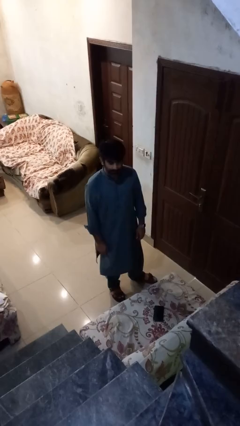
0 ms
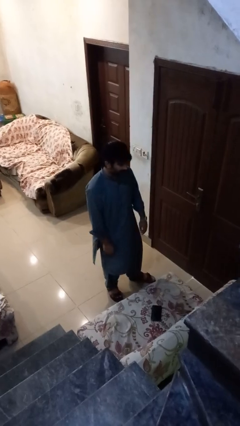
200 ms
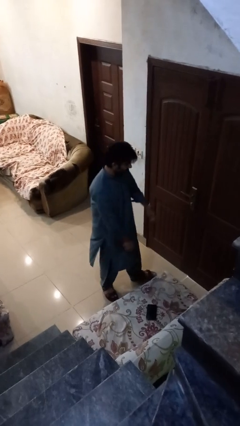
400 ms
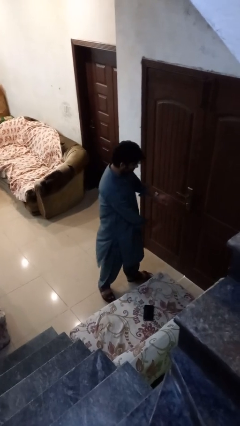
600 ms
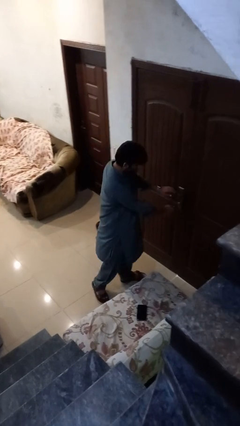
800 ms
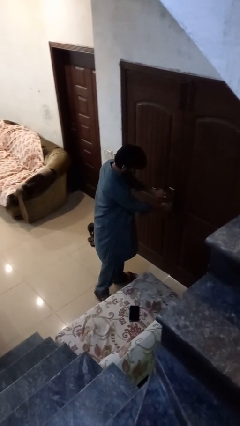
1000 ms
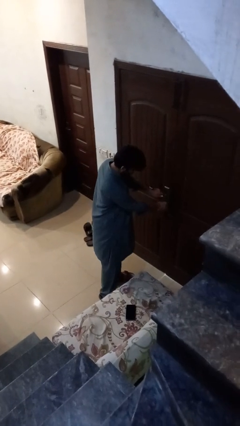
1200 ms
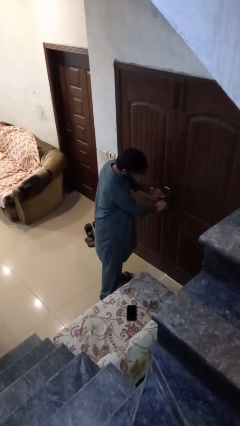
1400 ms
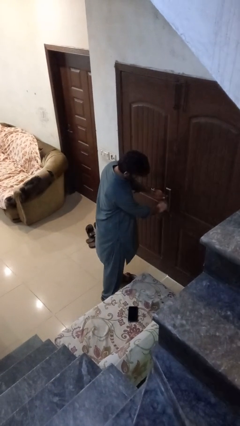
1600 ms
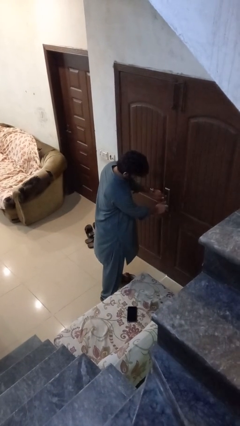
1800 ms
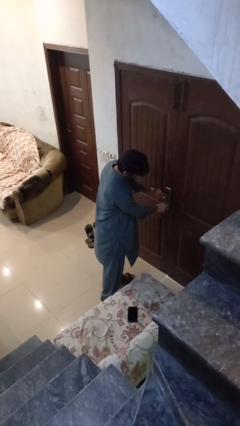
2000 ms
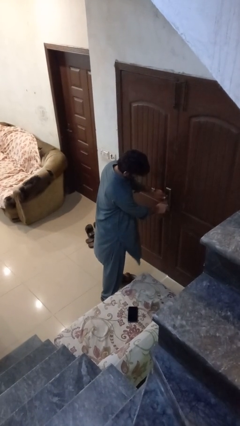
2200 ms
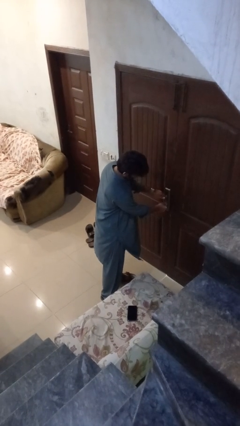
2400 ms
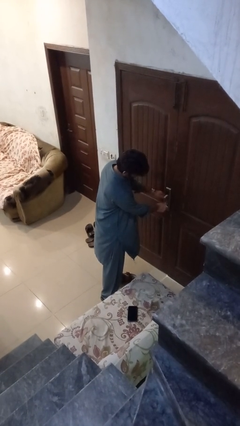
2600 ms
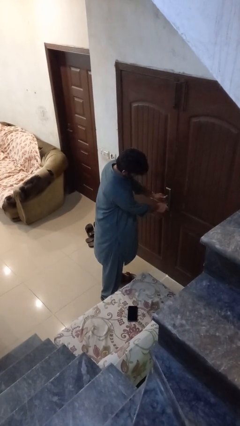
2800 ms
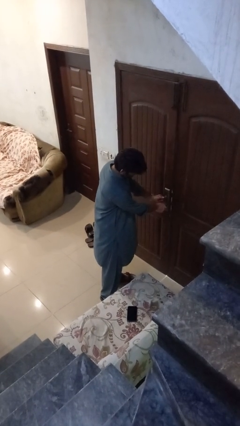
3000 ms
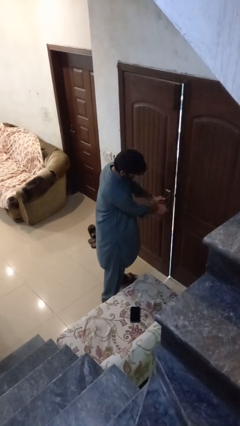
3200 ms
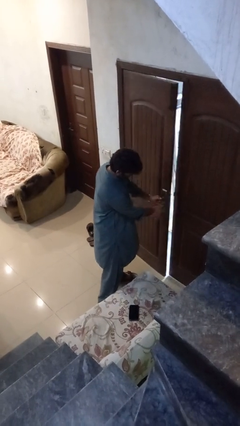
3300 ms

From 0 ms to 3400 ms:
person unlocks door with keys

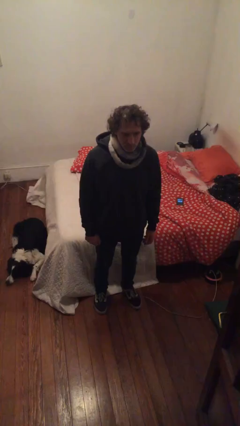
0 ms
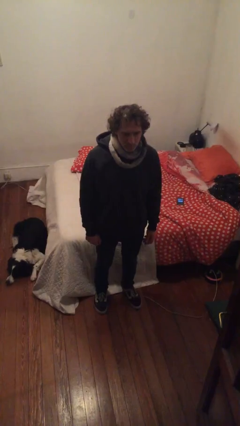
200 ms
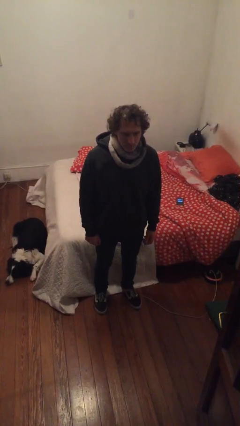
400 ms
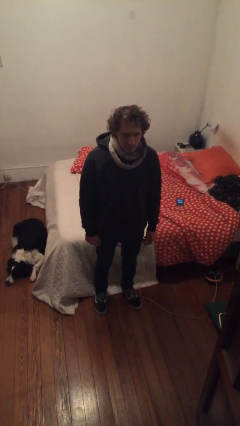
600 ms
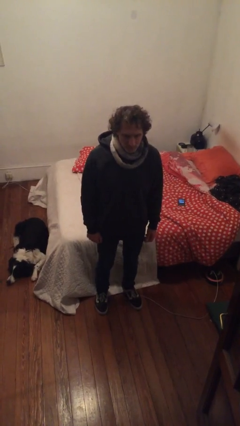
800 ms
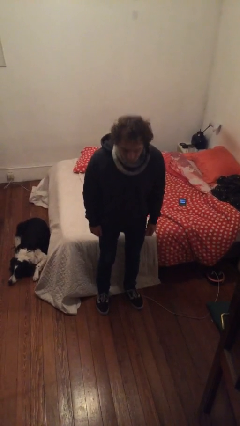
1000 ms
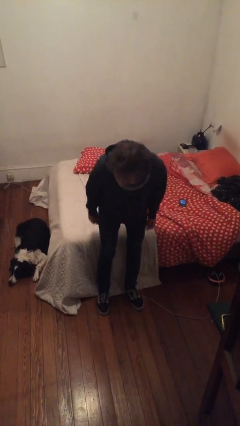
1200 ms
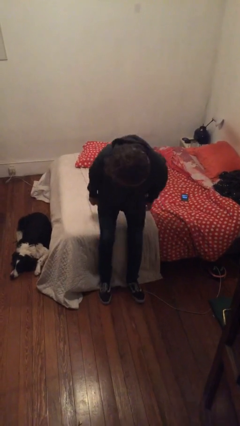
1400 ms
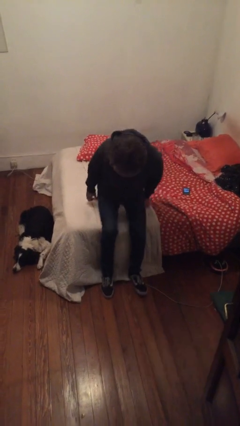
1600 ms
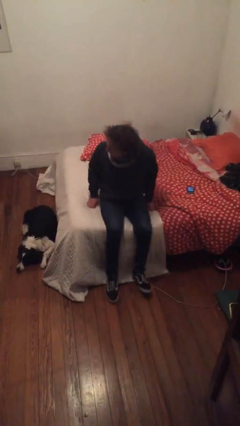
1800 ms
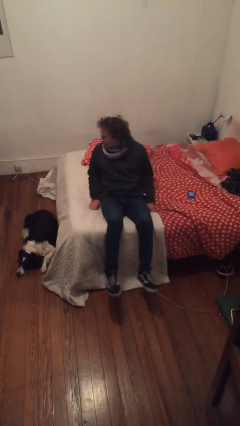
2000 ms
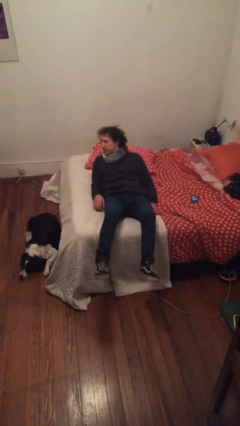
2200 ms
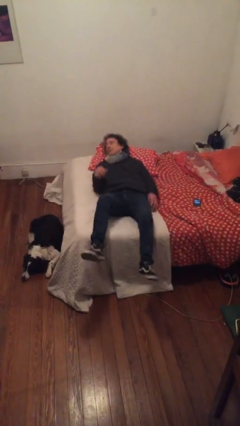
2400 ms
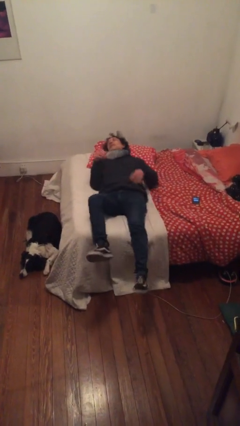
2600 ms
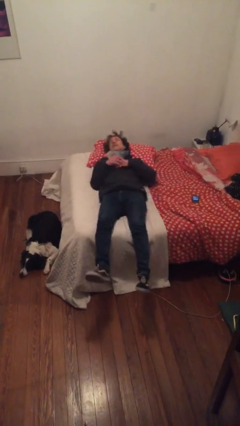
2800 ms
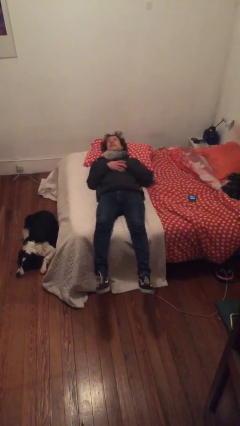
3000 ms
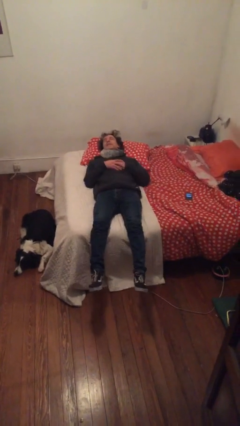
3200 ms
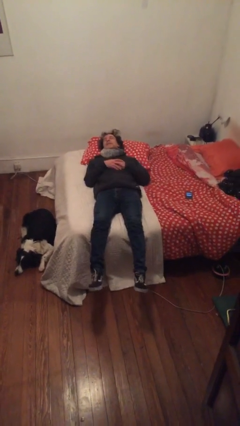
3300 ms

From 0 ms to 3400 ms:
person lies down on bed

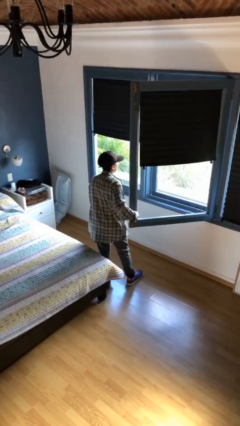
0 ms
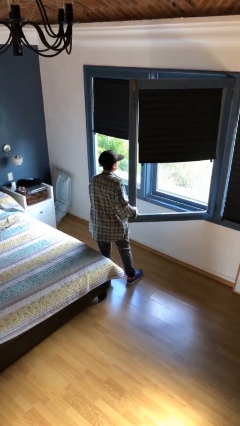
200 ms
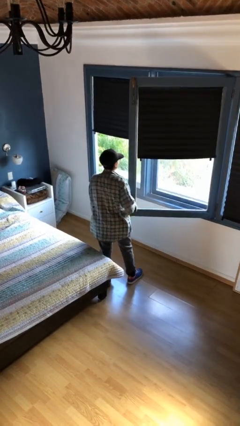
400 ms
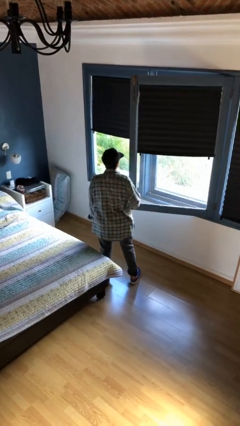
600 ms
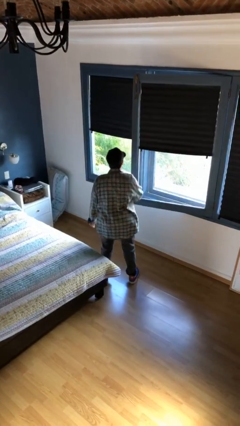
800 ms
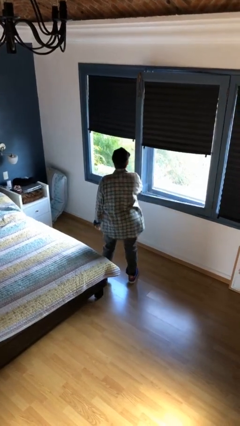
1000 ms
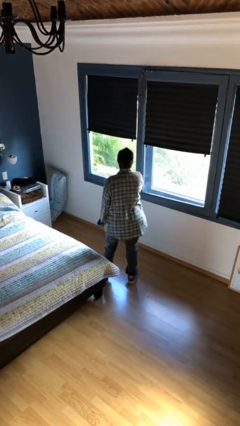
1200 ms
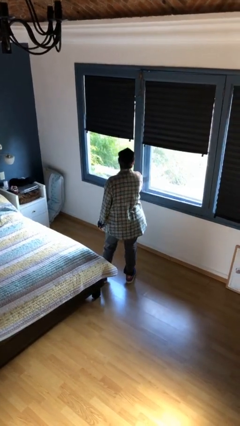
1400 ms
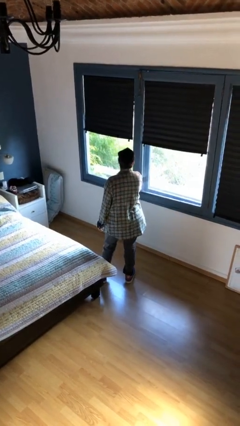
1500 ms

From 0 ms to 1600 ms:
person closes home window

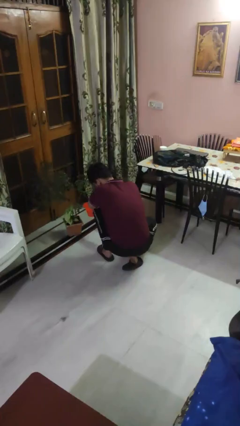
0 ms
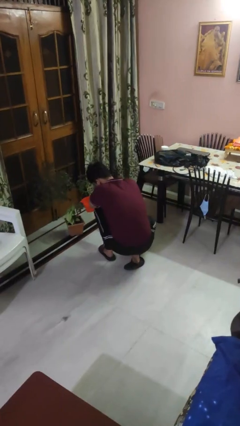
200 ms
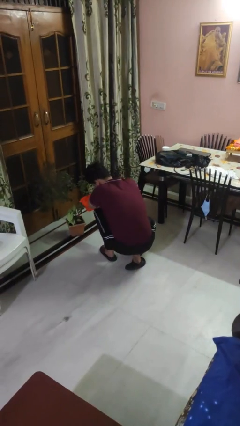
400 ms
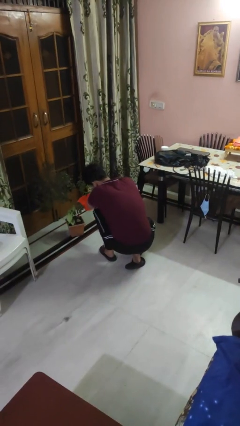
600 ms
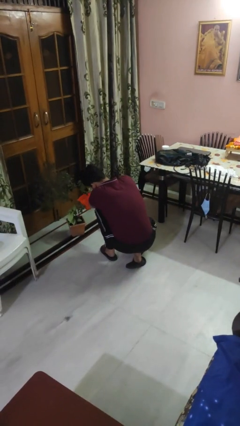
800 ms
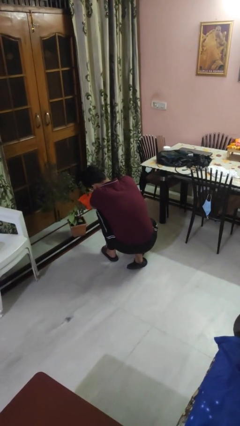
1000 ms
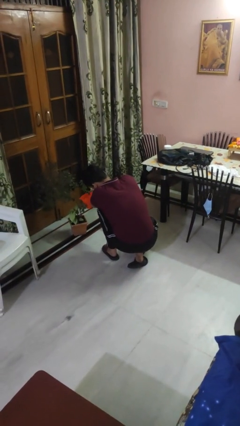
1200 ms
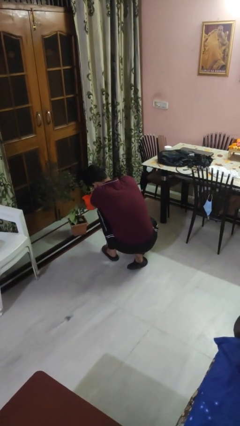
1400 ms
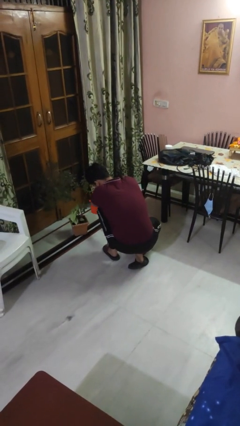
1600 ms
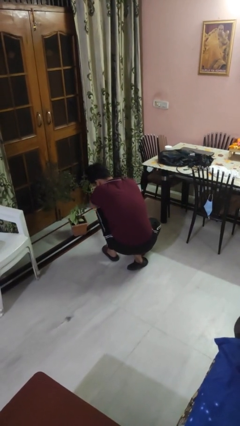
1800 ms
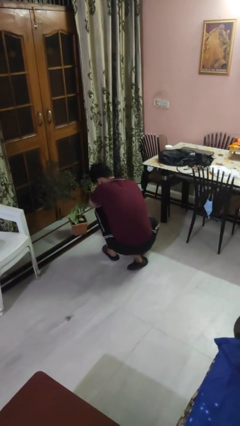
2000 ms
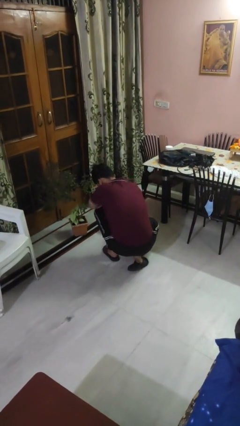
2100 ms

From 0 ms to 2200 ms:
person waters houseplant

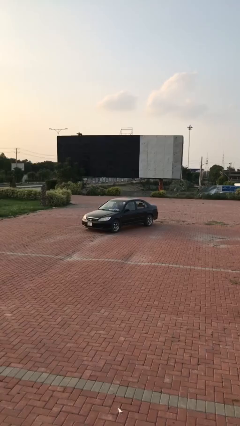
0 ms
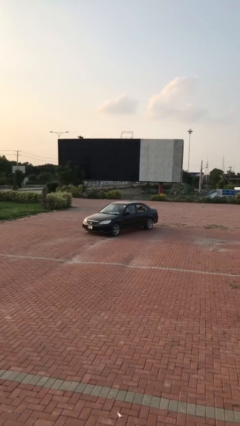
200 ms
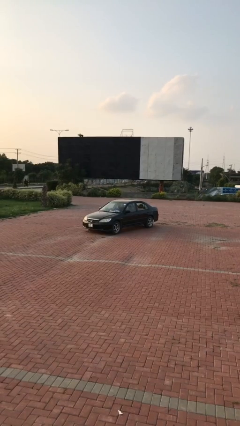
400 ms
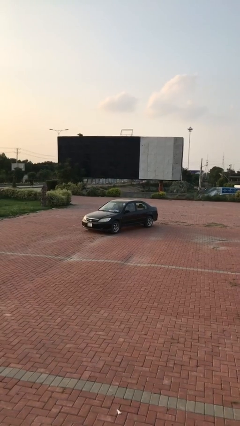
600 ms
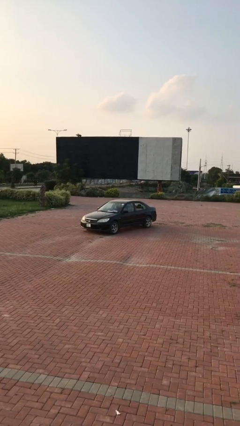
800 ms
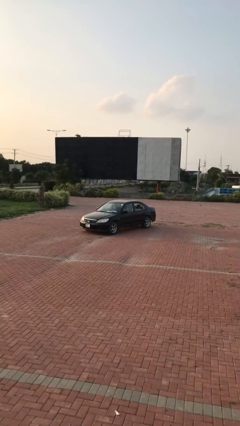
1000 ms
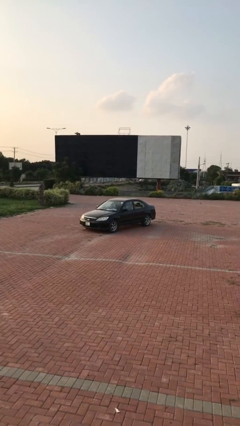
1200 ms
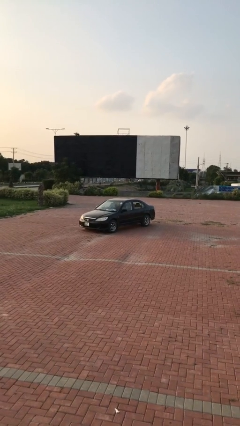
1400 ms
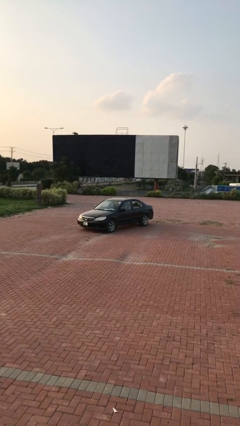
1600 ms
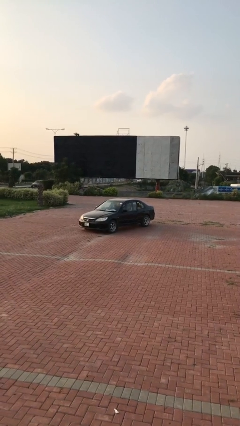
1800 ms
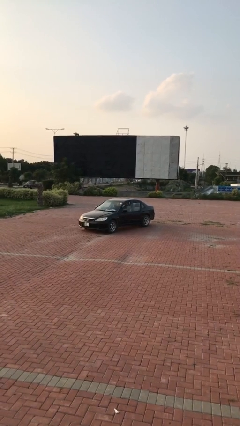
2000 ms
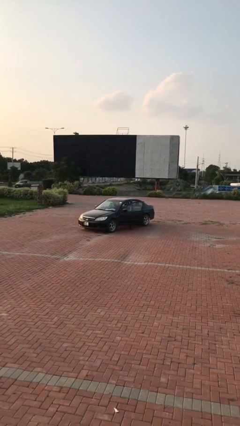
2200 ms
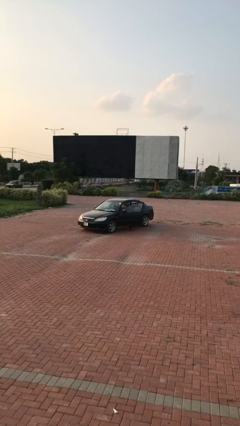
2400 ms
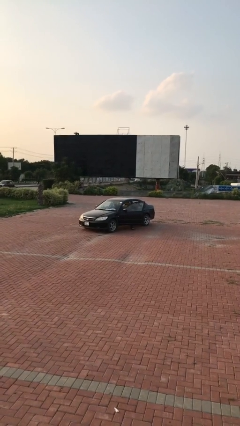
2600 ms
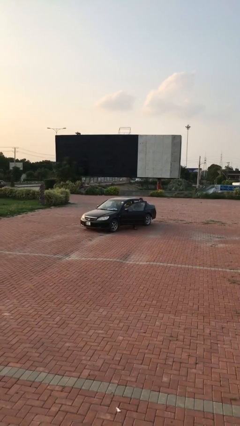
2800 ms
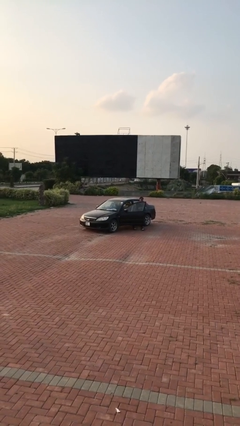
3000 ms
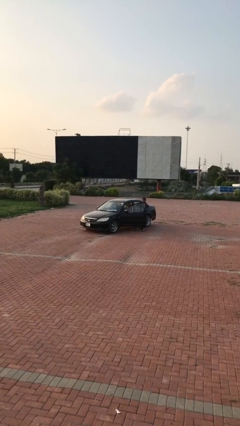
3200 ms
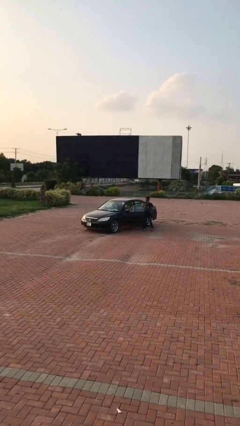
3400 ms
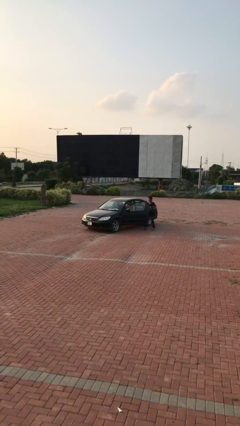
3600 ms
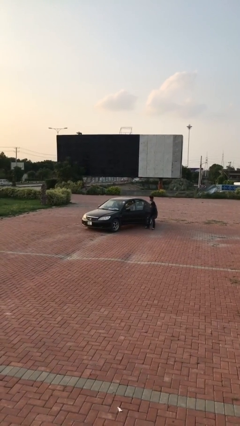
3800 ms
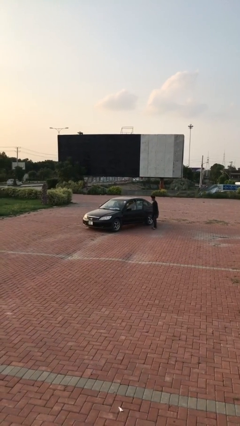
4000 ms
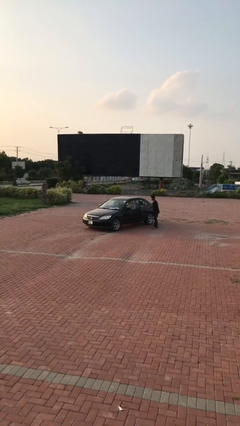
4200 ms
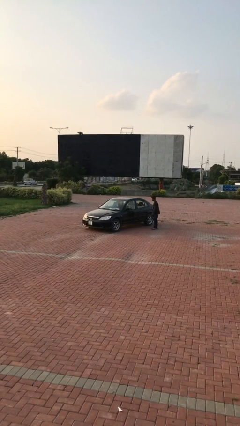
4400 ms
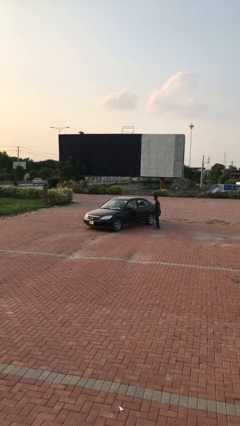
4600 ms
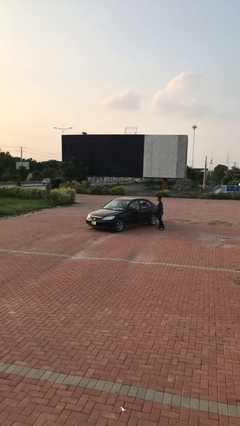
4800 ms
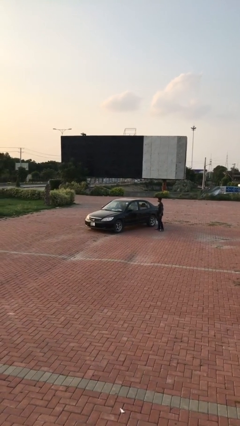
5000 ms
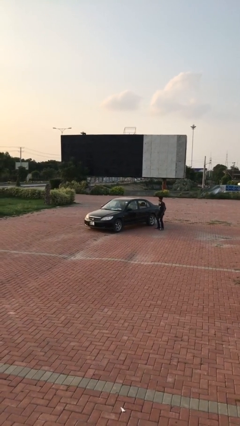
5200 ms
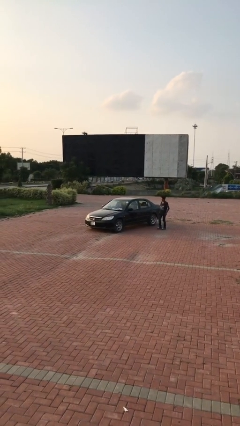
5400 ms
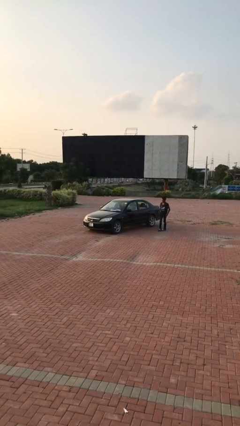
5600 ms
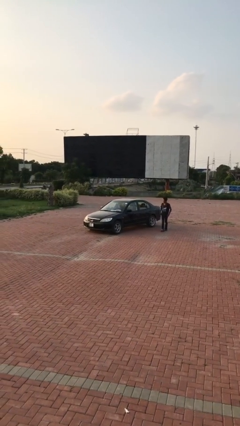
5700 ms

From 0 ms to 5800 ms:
car drops off person

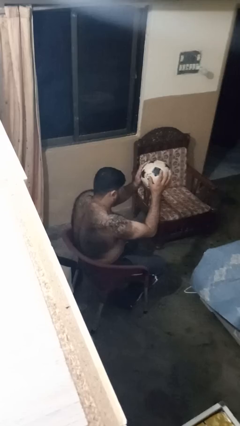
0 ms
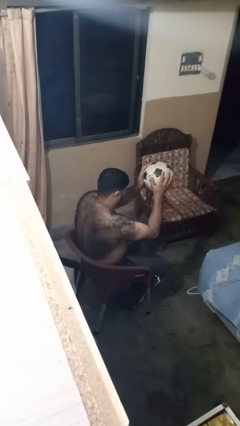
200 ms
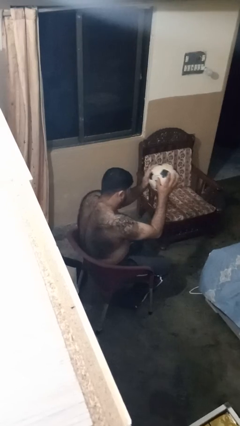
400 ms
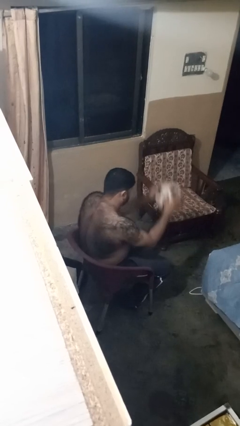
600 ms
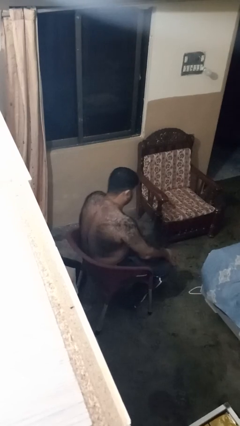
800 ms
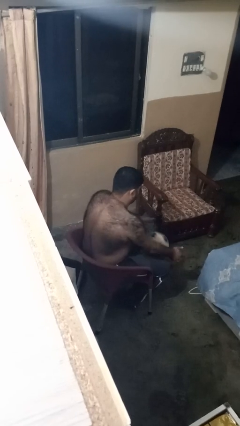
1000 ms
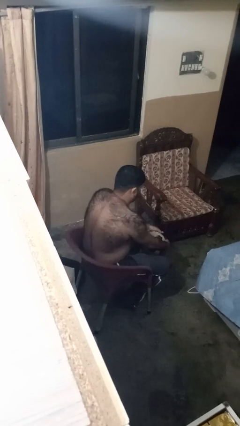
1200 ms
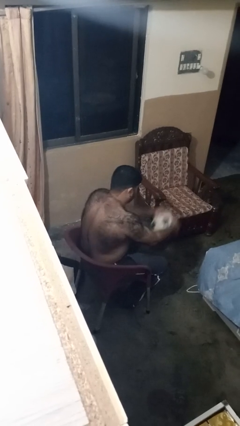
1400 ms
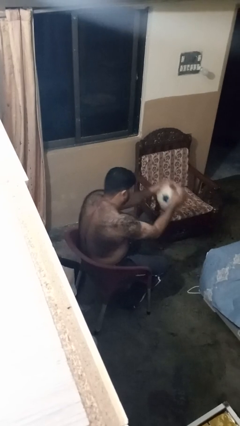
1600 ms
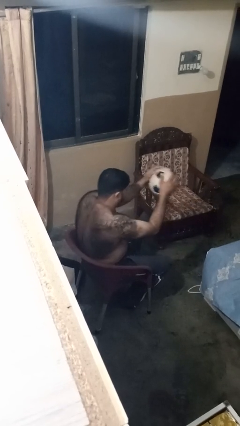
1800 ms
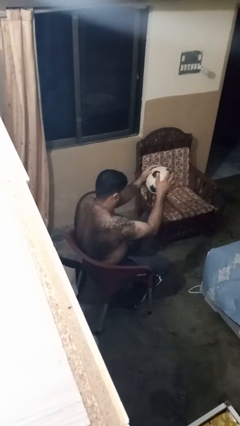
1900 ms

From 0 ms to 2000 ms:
person bounces ball on floor
